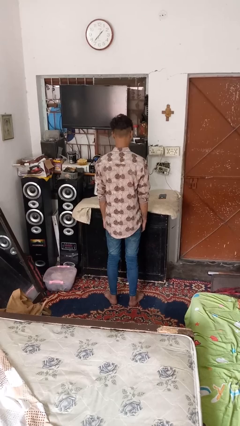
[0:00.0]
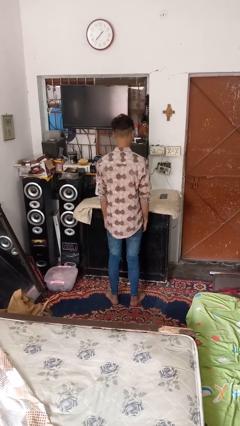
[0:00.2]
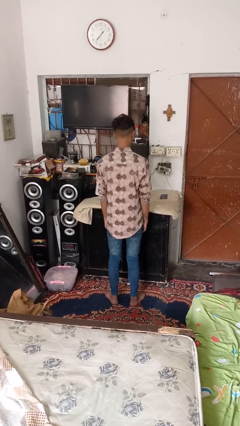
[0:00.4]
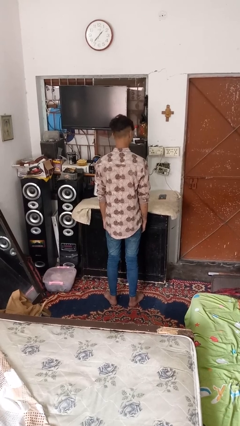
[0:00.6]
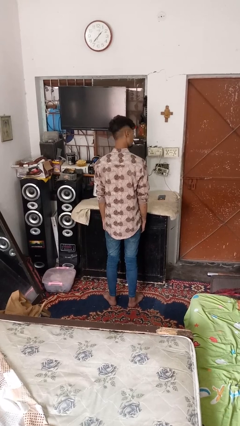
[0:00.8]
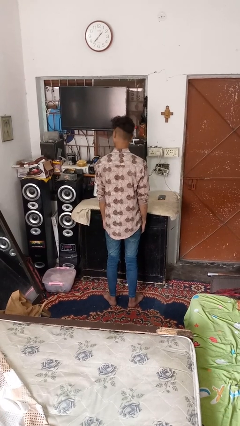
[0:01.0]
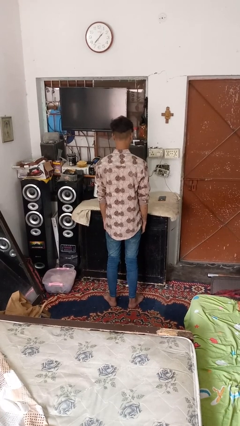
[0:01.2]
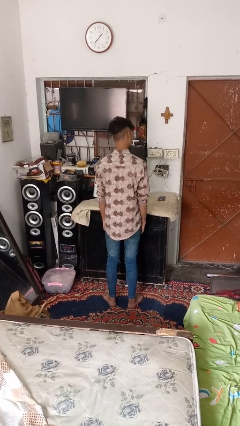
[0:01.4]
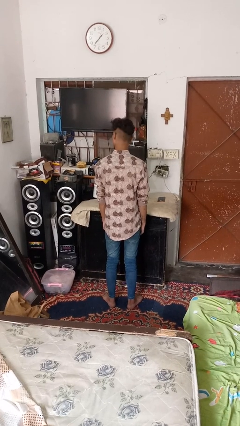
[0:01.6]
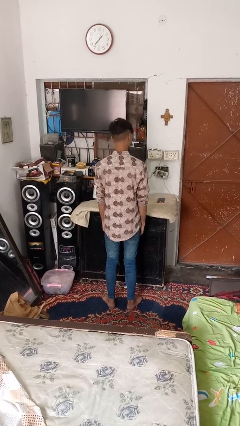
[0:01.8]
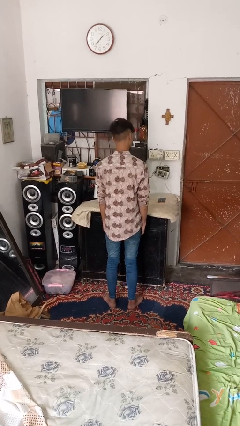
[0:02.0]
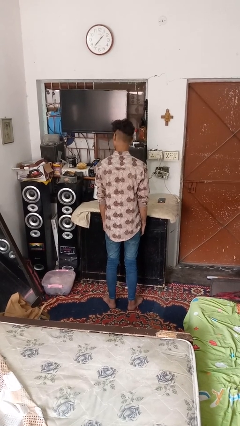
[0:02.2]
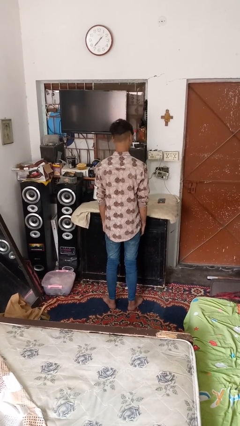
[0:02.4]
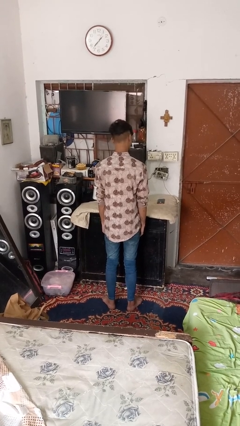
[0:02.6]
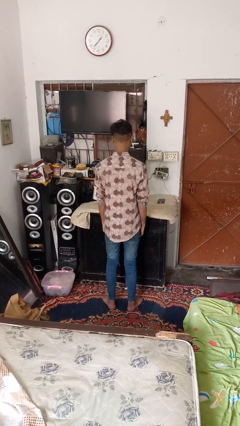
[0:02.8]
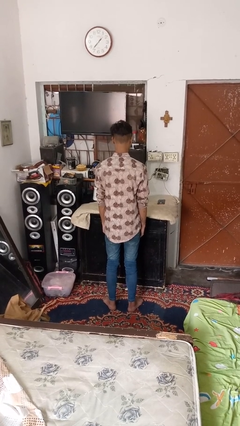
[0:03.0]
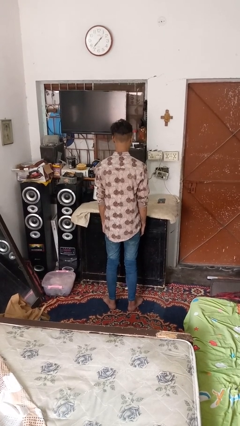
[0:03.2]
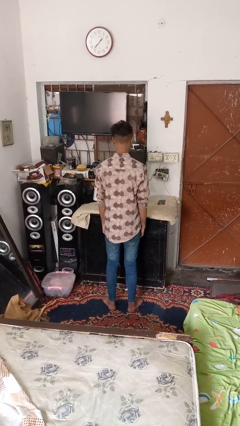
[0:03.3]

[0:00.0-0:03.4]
person shakes head

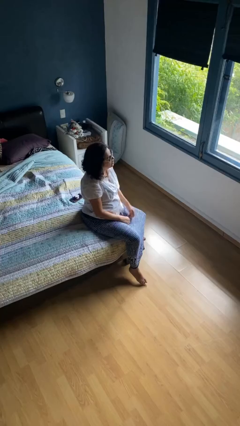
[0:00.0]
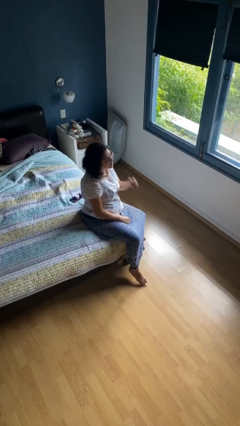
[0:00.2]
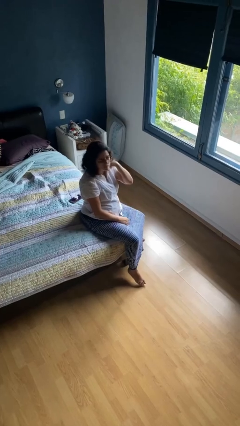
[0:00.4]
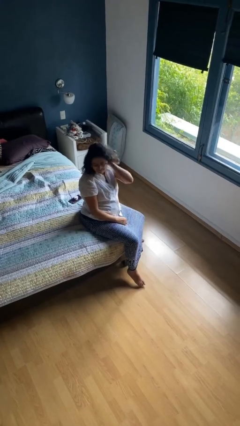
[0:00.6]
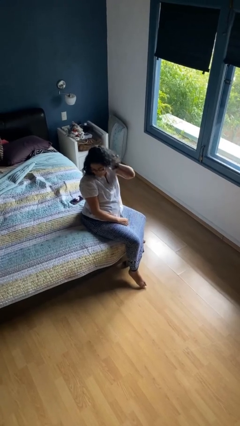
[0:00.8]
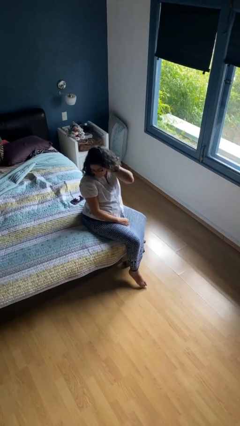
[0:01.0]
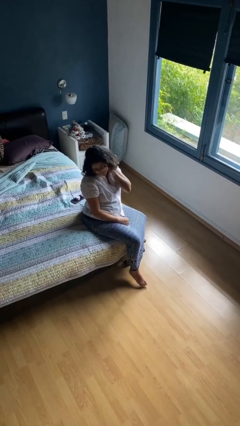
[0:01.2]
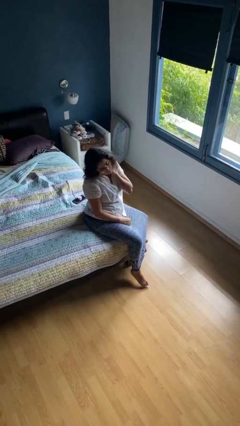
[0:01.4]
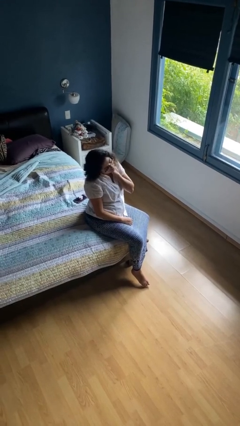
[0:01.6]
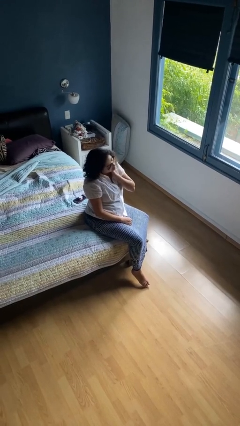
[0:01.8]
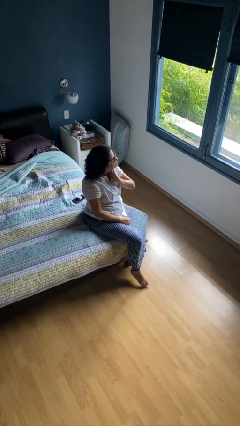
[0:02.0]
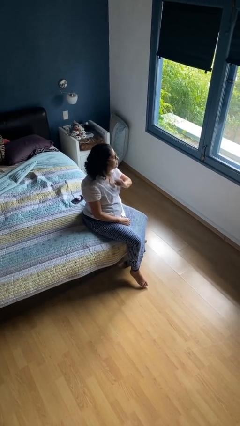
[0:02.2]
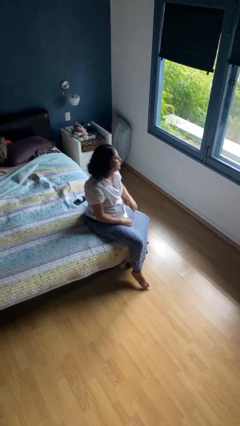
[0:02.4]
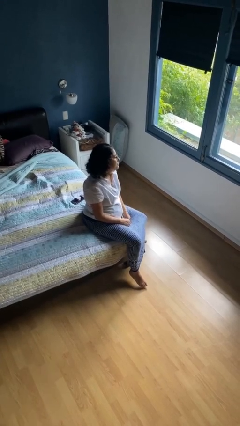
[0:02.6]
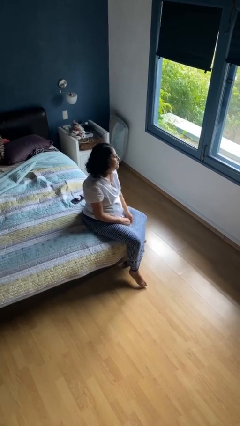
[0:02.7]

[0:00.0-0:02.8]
person rubs neck

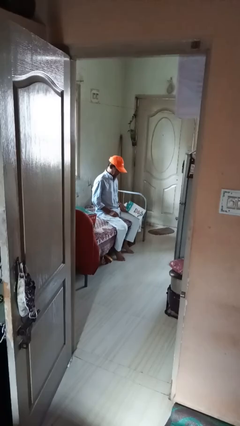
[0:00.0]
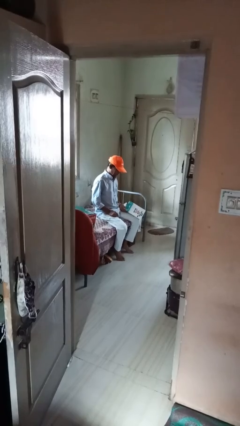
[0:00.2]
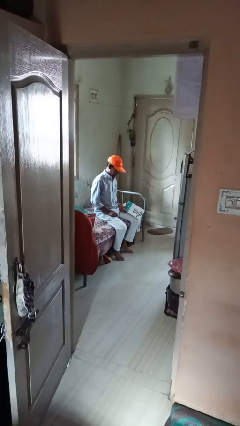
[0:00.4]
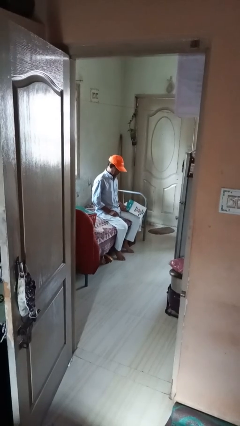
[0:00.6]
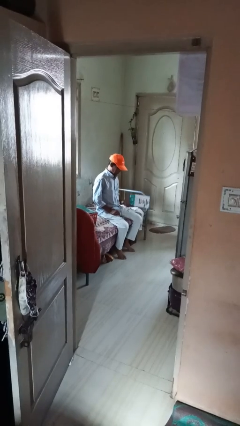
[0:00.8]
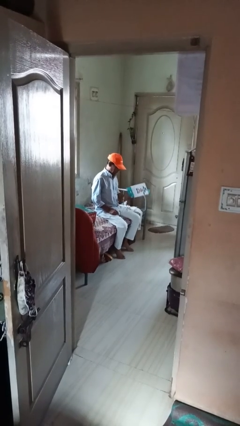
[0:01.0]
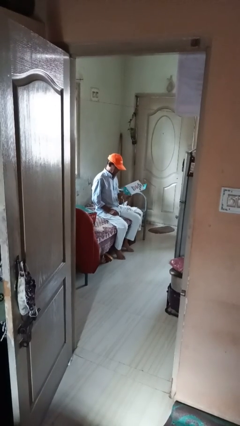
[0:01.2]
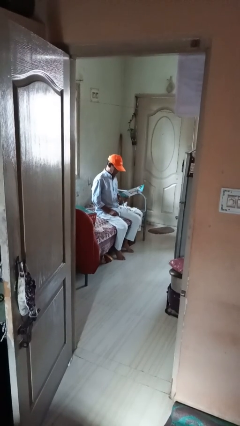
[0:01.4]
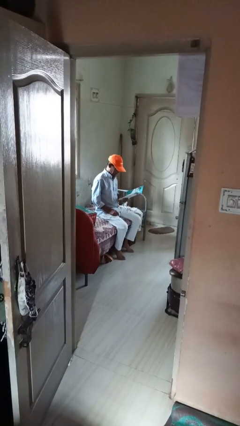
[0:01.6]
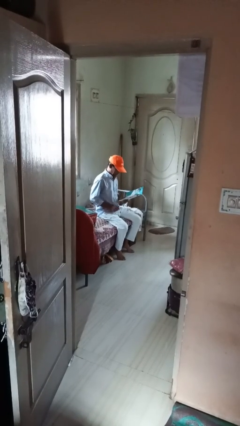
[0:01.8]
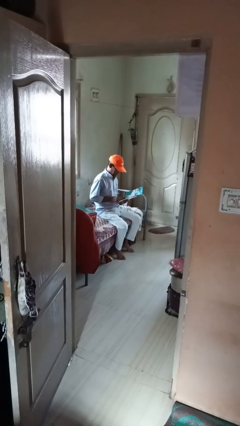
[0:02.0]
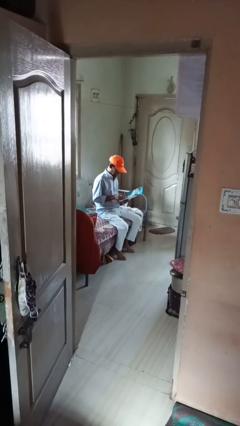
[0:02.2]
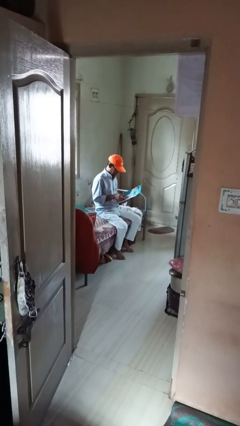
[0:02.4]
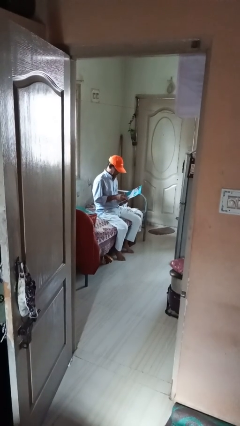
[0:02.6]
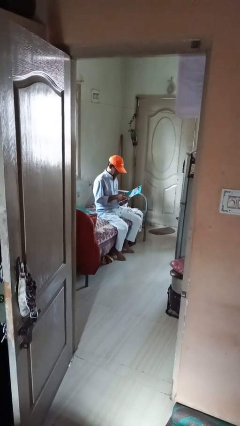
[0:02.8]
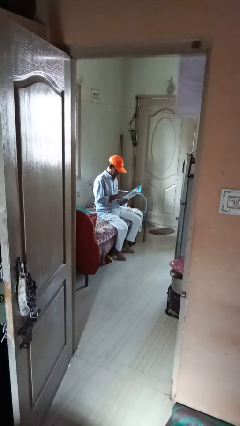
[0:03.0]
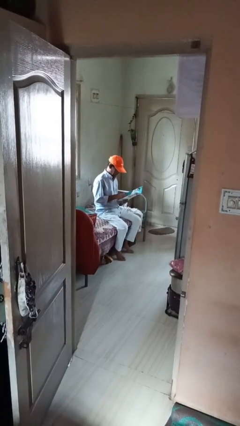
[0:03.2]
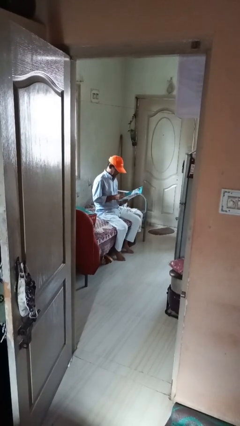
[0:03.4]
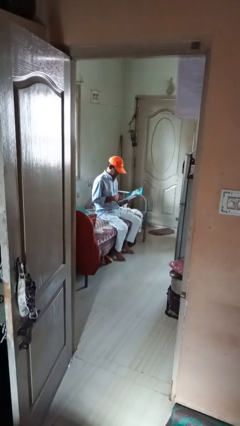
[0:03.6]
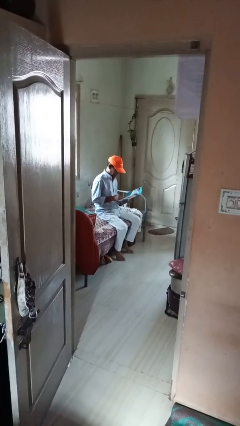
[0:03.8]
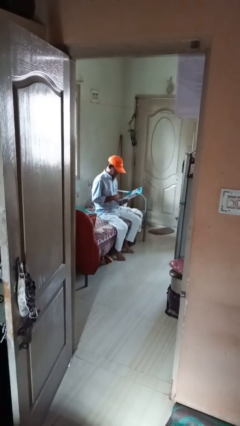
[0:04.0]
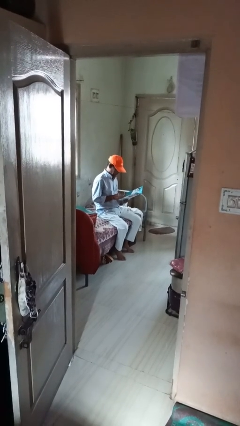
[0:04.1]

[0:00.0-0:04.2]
person reads magazine

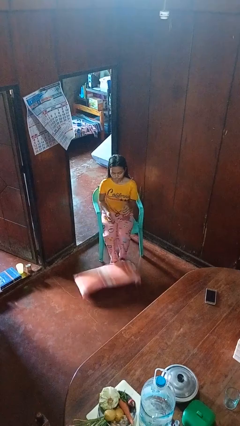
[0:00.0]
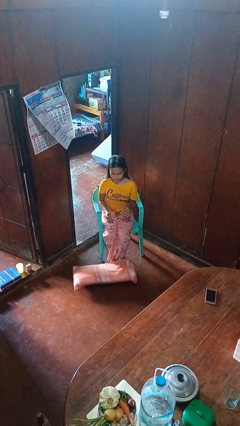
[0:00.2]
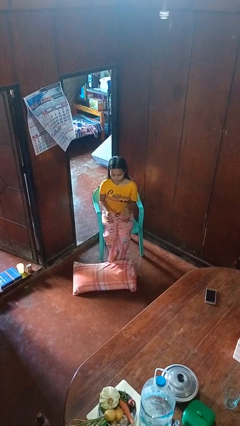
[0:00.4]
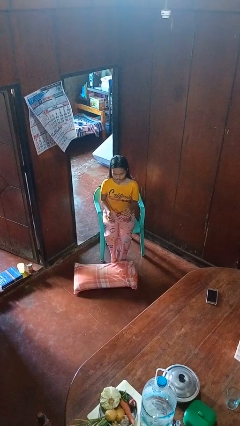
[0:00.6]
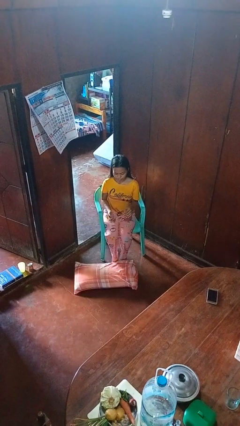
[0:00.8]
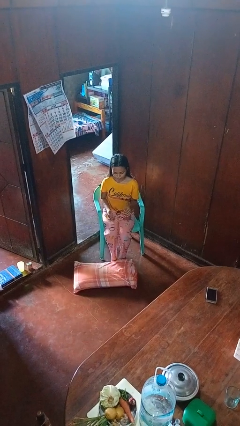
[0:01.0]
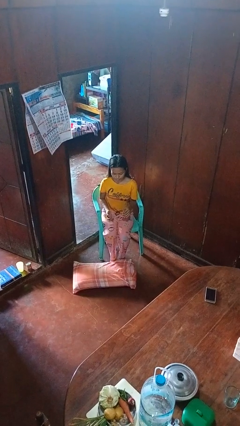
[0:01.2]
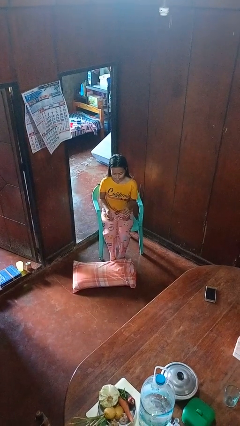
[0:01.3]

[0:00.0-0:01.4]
person drops object

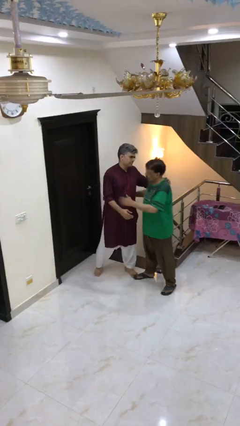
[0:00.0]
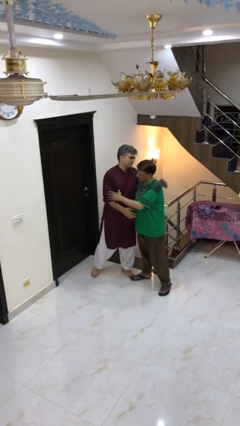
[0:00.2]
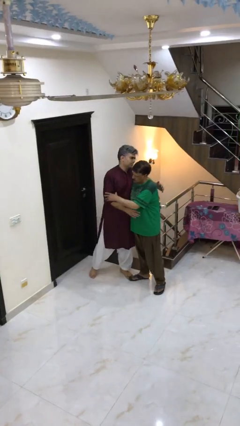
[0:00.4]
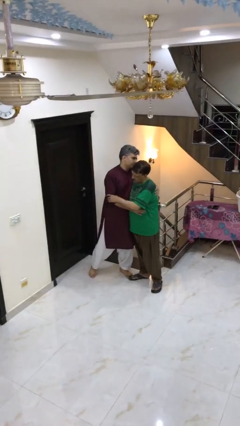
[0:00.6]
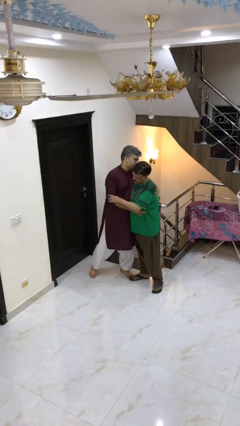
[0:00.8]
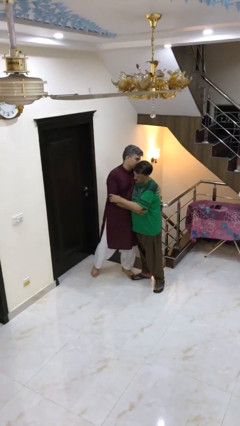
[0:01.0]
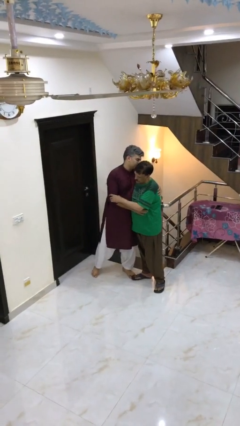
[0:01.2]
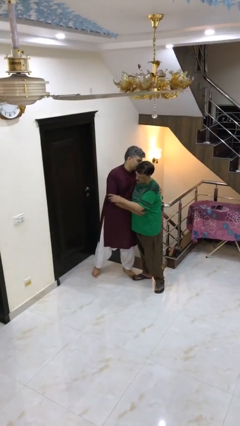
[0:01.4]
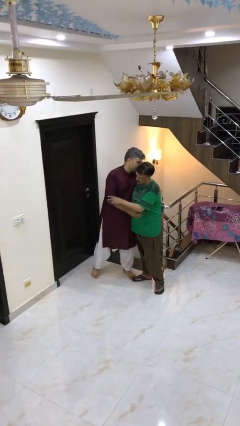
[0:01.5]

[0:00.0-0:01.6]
person embraces person

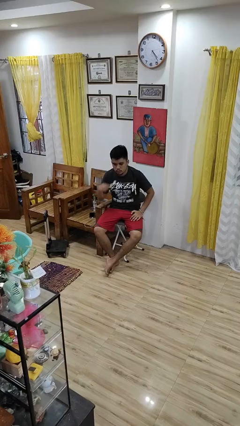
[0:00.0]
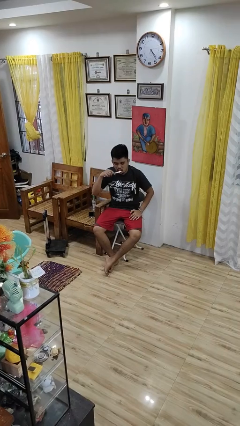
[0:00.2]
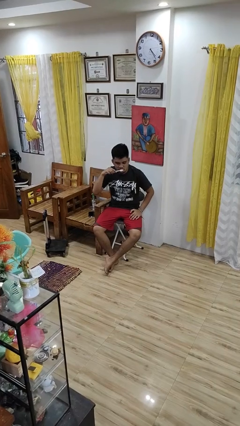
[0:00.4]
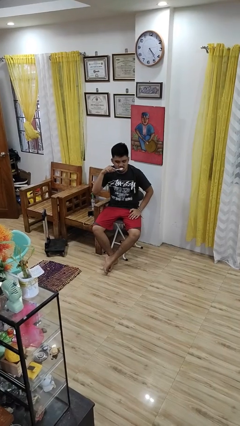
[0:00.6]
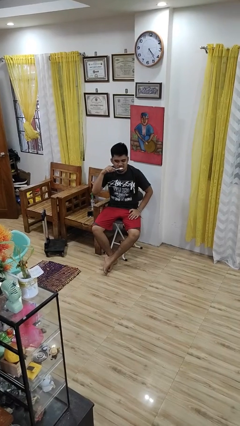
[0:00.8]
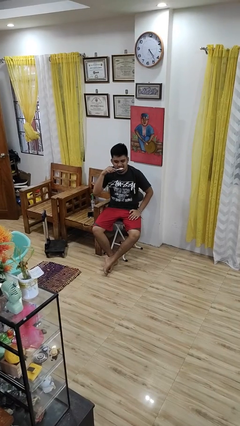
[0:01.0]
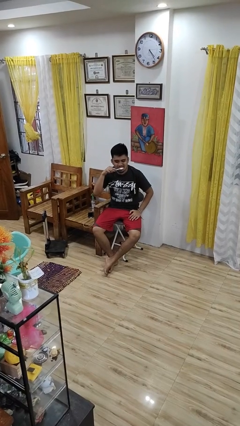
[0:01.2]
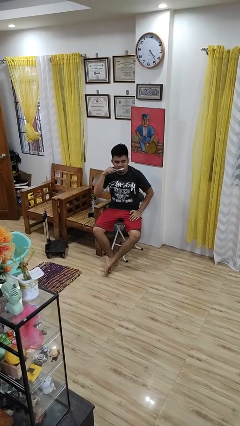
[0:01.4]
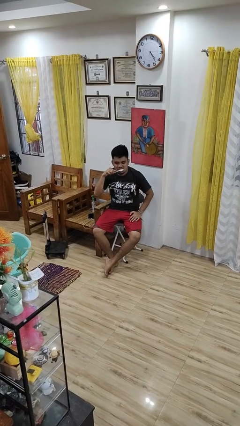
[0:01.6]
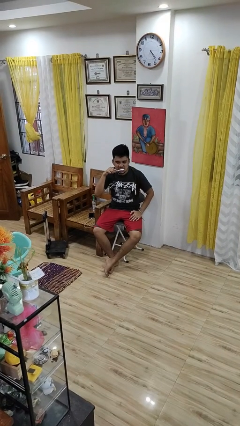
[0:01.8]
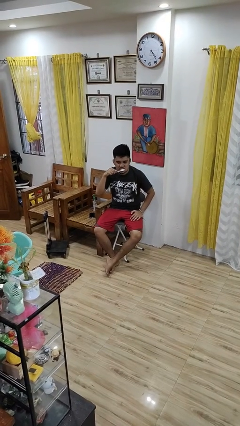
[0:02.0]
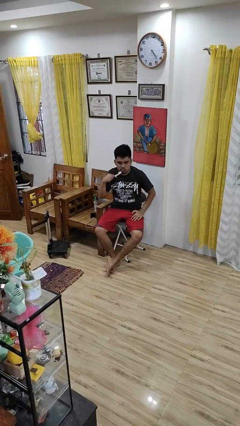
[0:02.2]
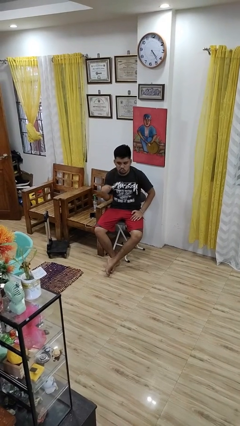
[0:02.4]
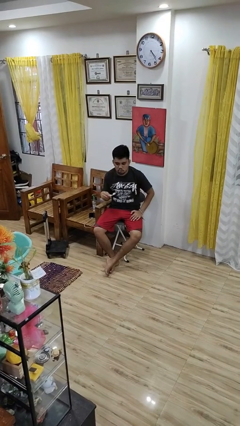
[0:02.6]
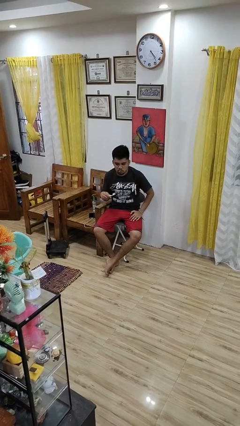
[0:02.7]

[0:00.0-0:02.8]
person brushes teeth

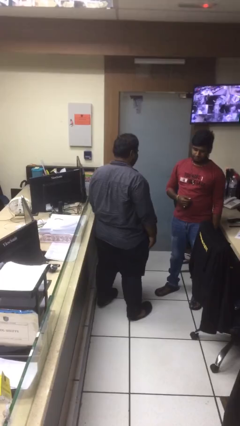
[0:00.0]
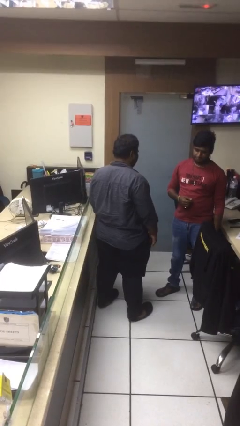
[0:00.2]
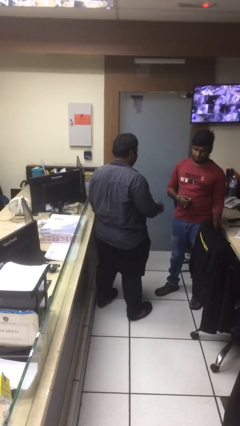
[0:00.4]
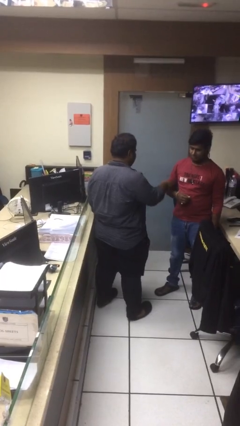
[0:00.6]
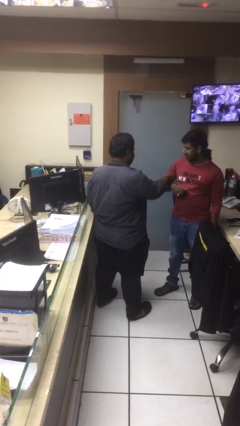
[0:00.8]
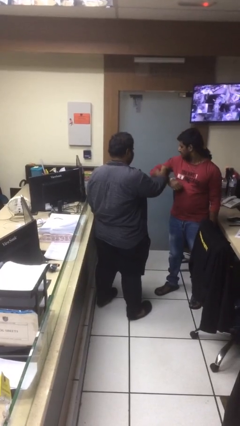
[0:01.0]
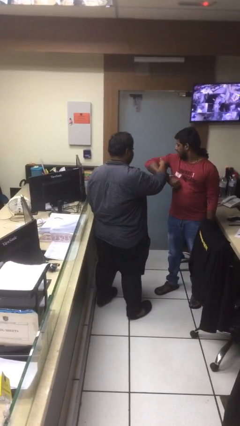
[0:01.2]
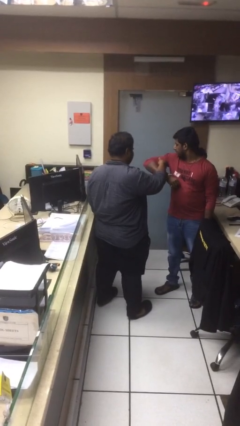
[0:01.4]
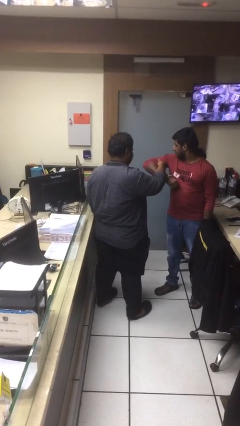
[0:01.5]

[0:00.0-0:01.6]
person grabs person by bicep
